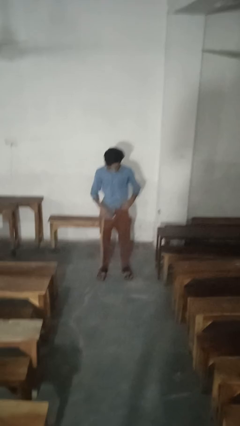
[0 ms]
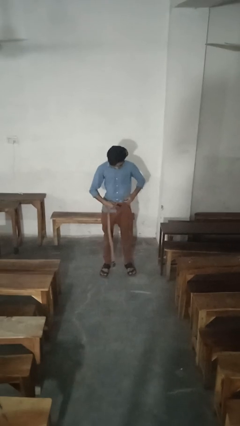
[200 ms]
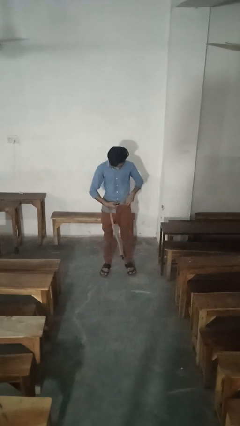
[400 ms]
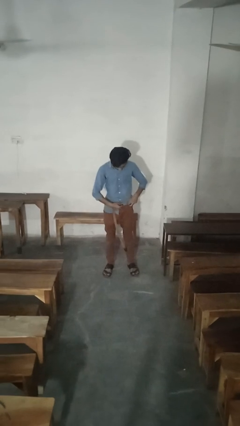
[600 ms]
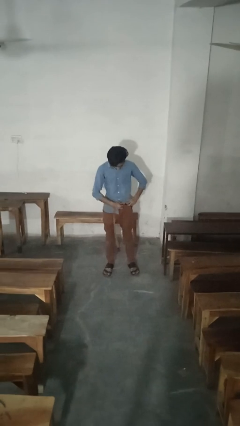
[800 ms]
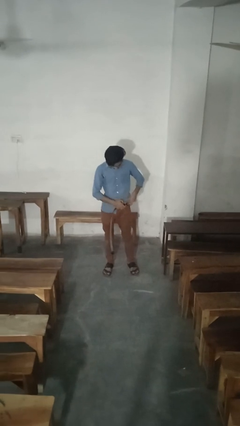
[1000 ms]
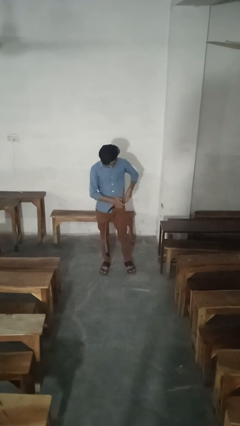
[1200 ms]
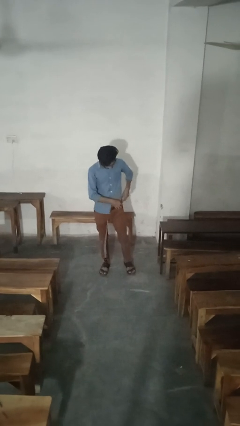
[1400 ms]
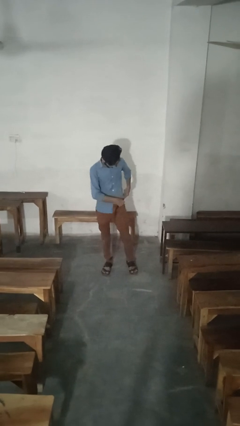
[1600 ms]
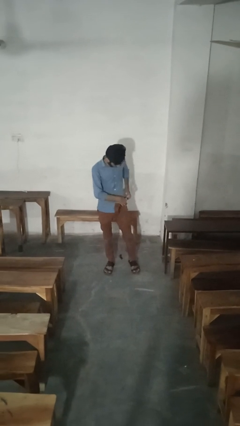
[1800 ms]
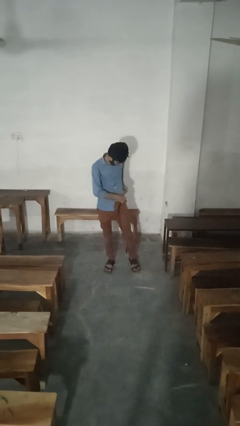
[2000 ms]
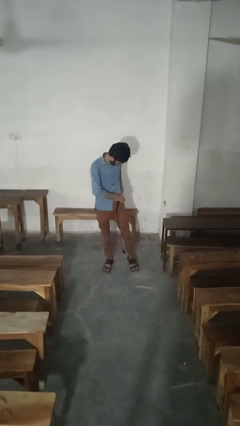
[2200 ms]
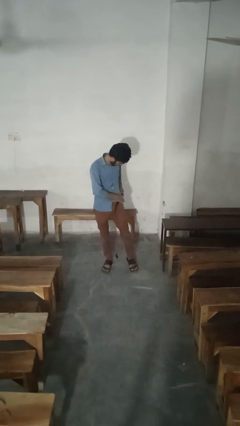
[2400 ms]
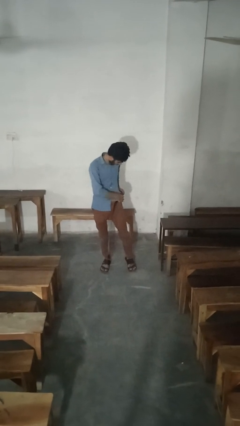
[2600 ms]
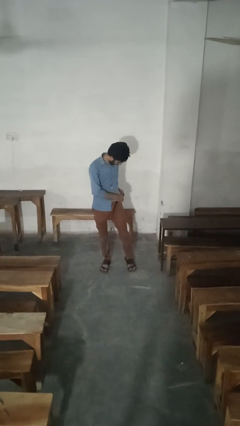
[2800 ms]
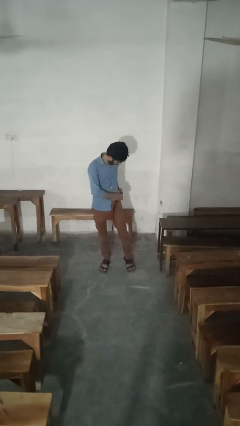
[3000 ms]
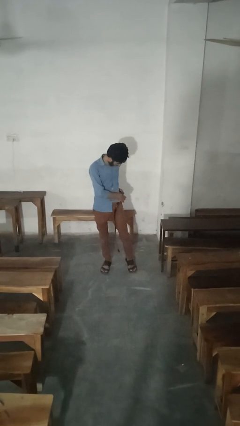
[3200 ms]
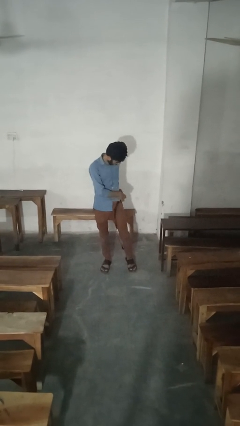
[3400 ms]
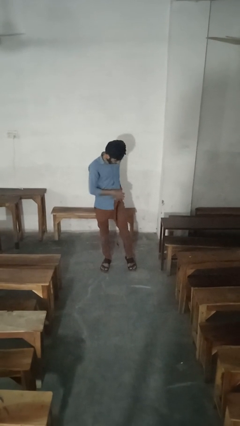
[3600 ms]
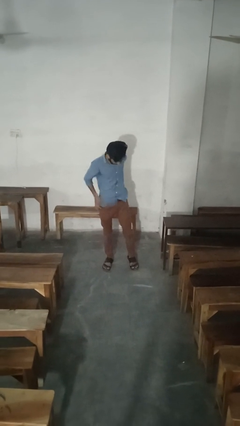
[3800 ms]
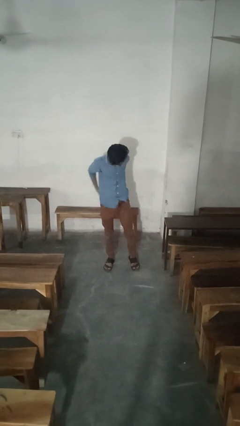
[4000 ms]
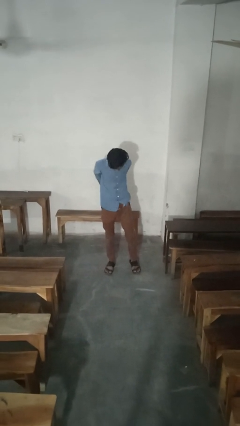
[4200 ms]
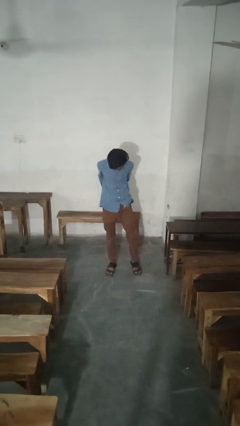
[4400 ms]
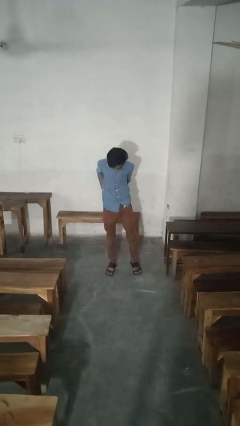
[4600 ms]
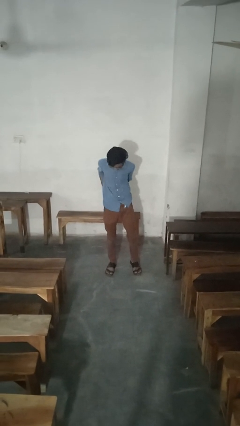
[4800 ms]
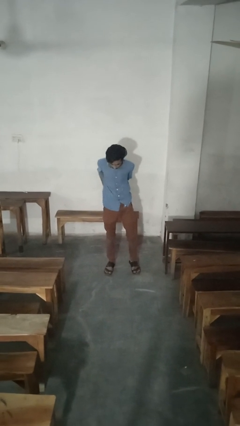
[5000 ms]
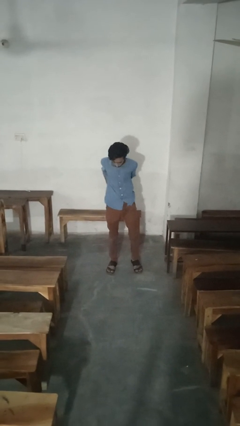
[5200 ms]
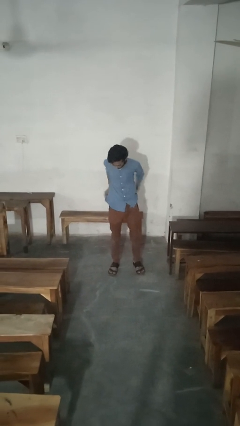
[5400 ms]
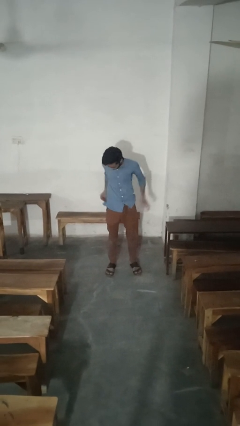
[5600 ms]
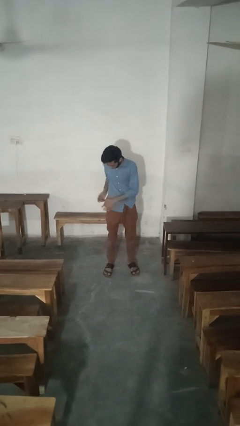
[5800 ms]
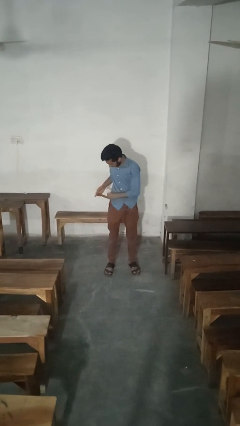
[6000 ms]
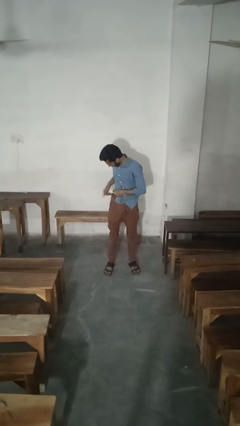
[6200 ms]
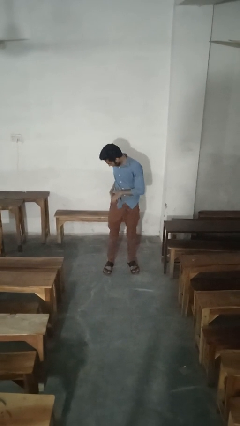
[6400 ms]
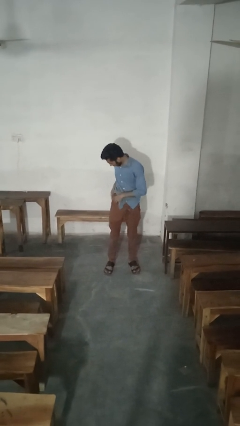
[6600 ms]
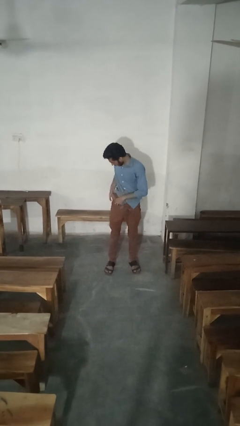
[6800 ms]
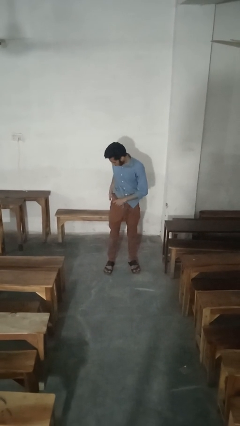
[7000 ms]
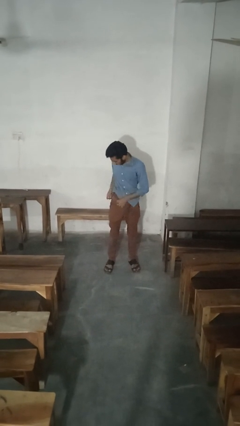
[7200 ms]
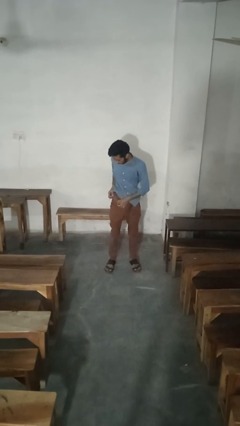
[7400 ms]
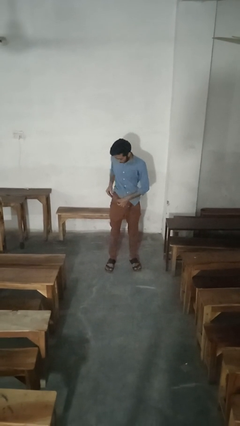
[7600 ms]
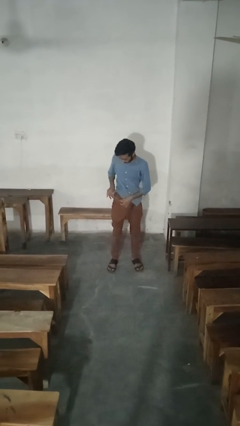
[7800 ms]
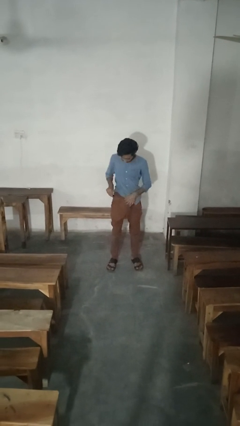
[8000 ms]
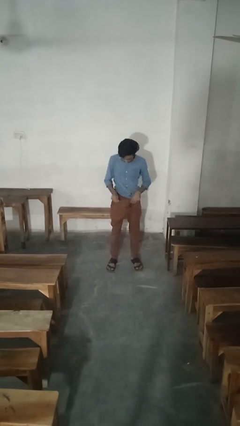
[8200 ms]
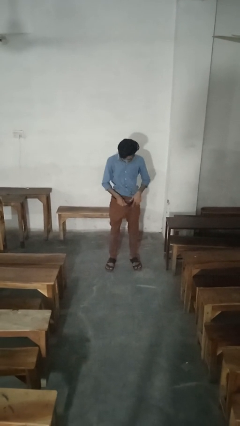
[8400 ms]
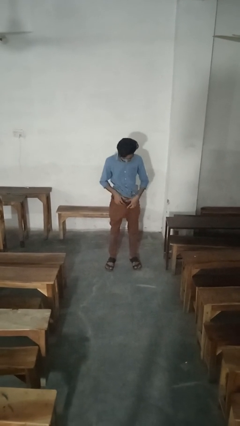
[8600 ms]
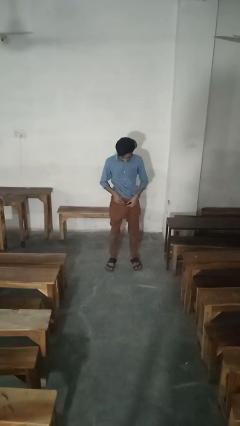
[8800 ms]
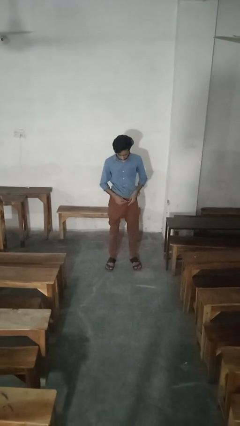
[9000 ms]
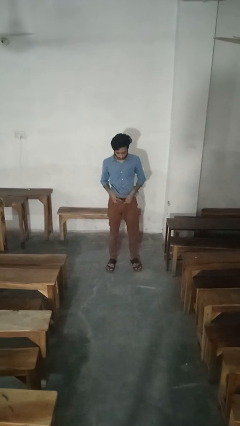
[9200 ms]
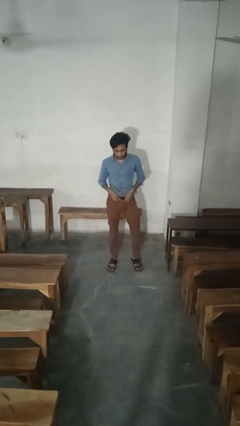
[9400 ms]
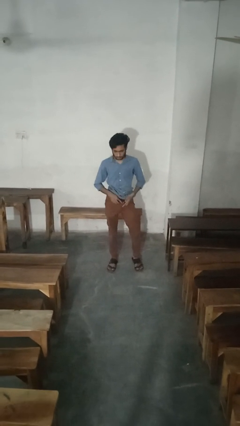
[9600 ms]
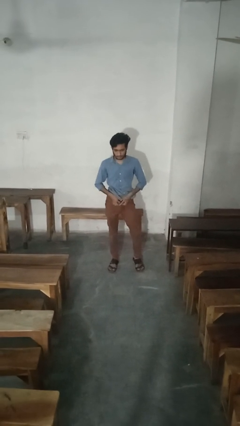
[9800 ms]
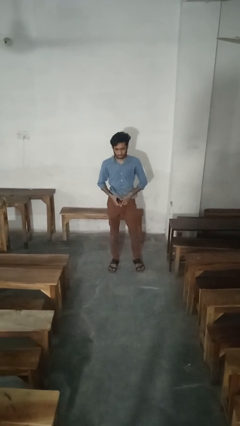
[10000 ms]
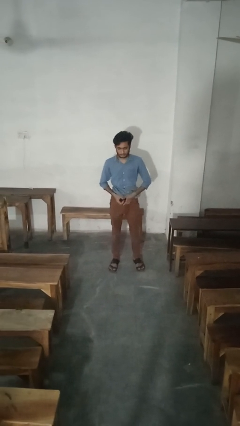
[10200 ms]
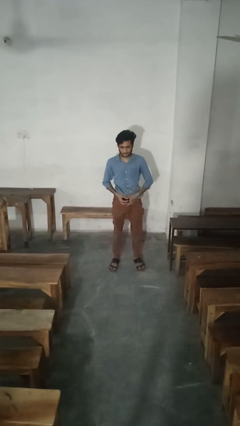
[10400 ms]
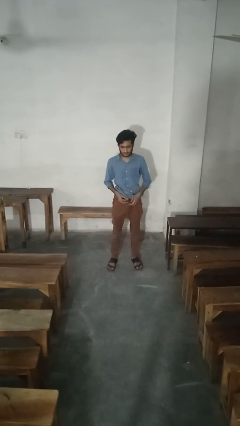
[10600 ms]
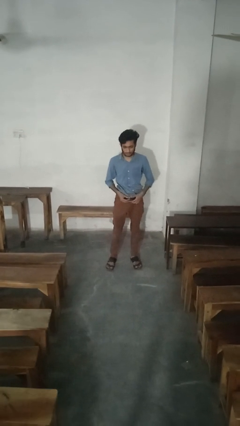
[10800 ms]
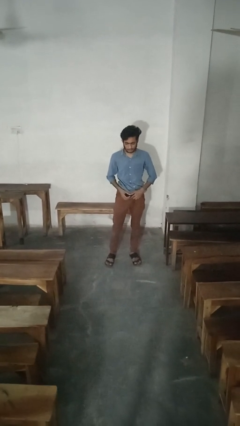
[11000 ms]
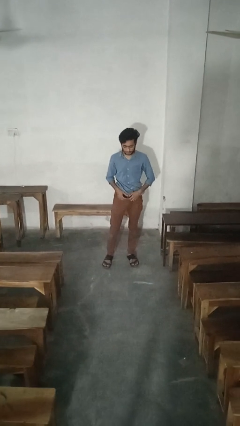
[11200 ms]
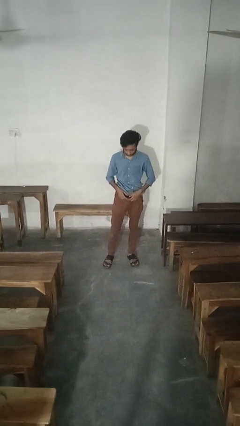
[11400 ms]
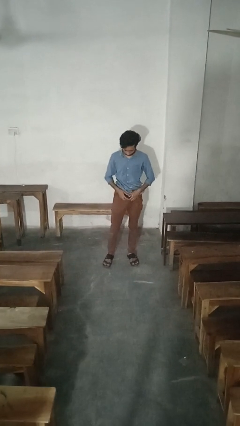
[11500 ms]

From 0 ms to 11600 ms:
person puts on belt

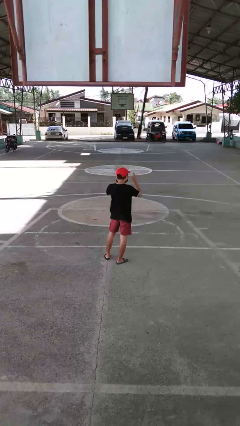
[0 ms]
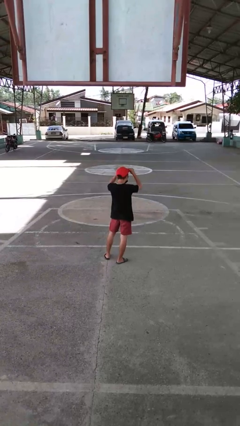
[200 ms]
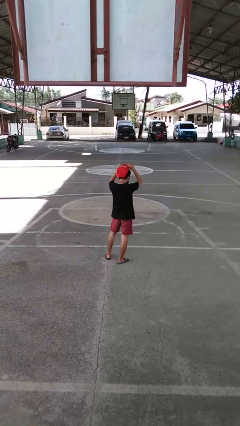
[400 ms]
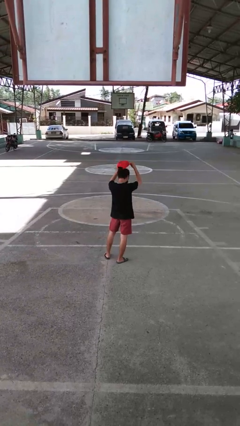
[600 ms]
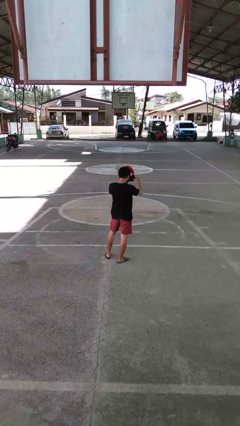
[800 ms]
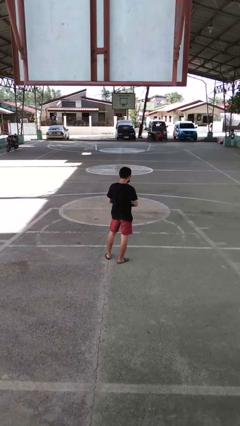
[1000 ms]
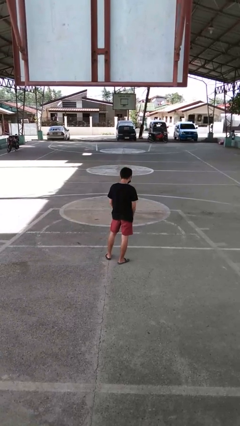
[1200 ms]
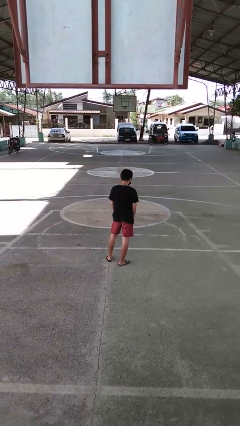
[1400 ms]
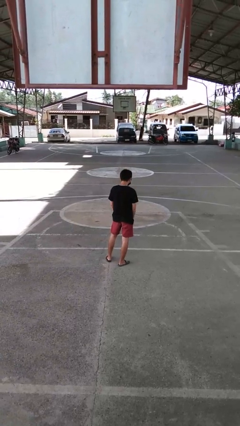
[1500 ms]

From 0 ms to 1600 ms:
person takes off hat

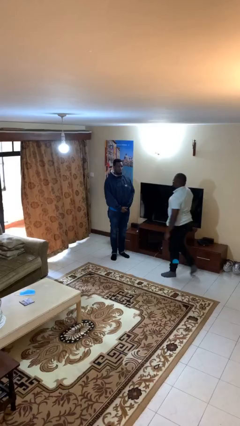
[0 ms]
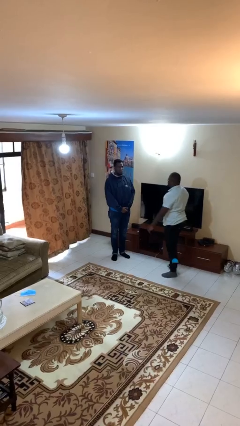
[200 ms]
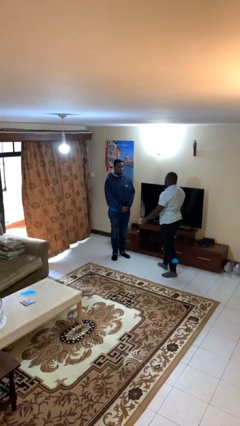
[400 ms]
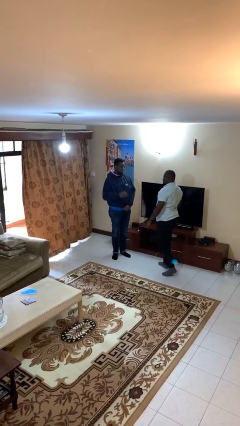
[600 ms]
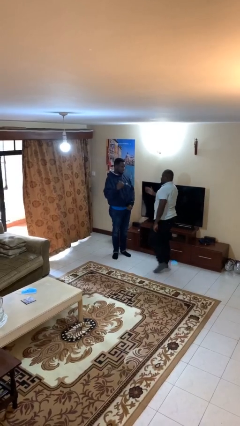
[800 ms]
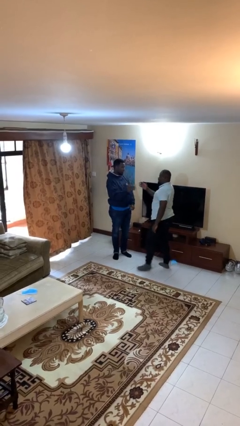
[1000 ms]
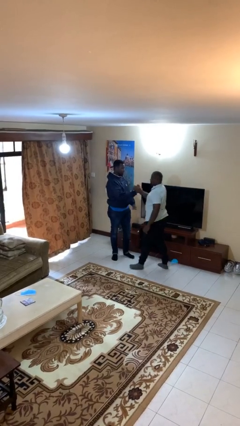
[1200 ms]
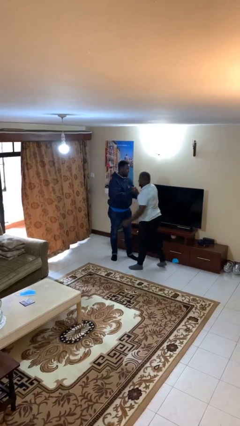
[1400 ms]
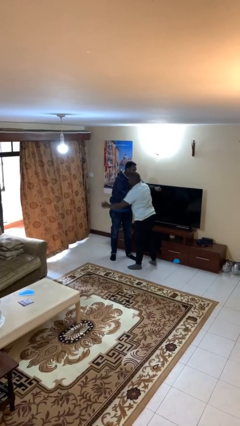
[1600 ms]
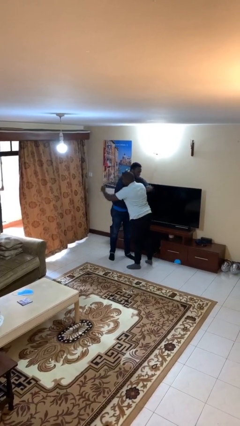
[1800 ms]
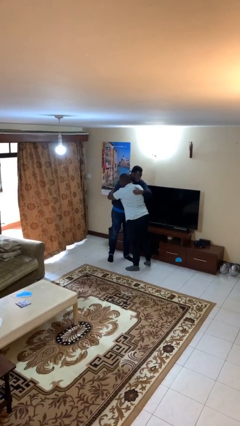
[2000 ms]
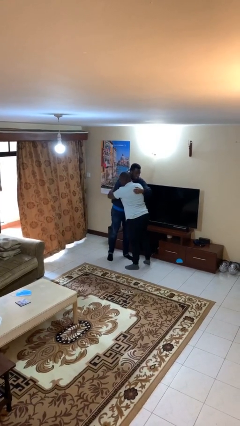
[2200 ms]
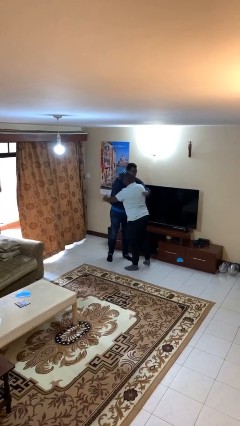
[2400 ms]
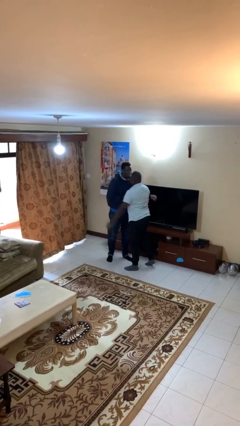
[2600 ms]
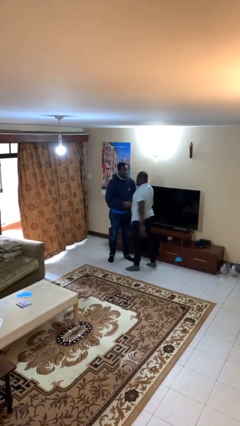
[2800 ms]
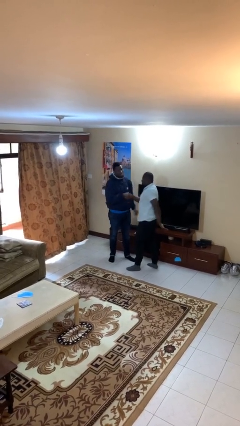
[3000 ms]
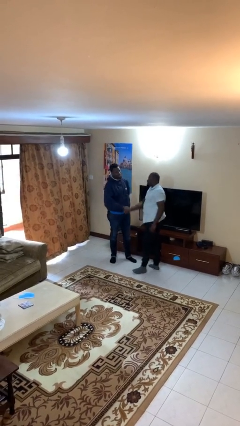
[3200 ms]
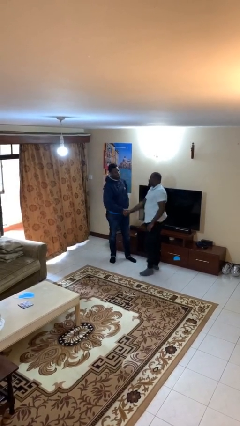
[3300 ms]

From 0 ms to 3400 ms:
person embraces person

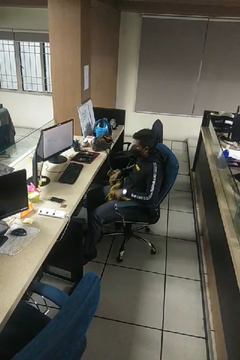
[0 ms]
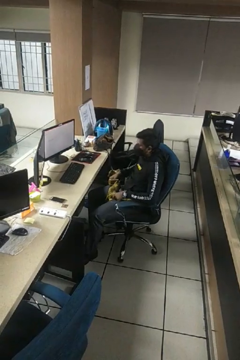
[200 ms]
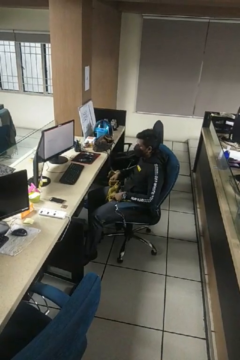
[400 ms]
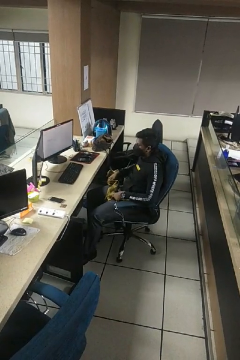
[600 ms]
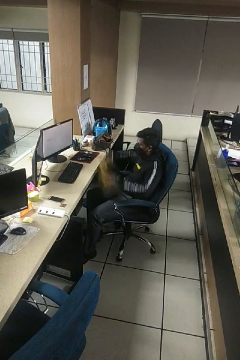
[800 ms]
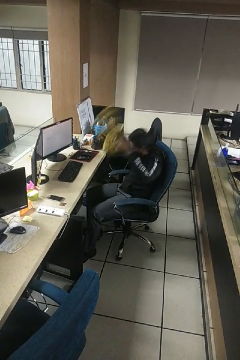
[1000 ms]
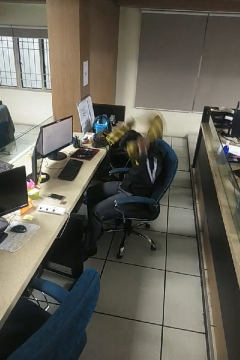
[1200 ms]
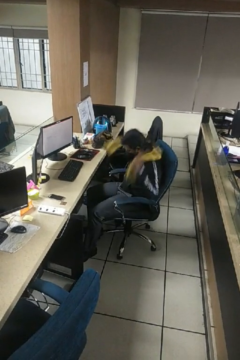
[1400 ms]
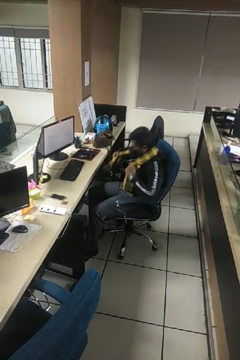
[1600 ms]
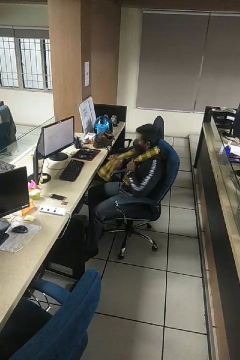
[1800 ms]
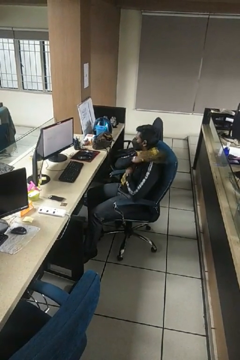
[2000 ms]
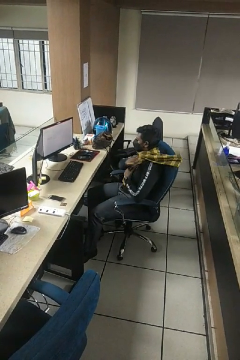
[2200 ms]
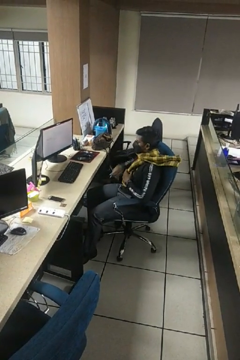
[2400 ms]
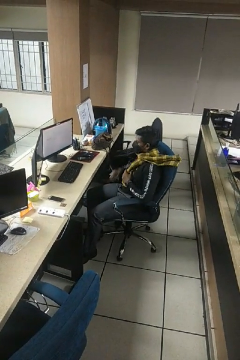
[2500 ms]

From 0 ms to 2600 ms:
person puts on scarf
